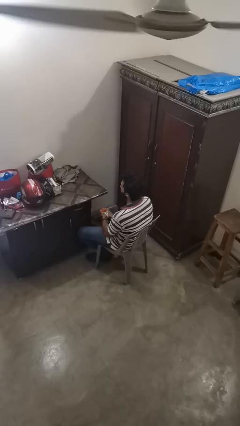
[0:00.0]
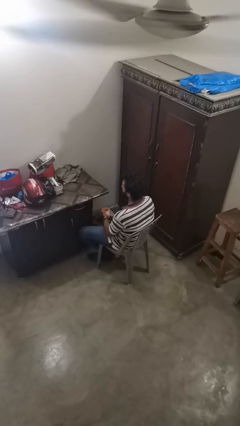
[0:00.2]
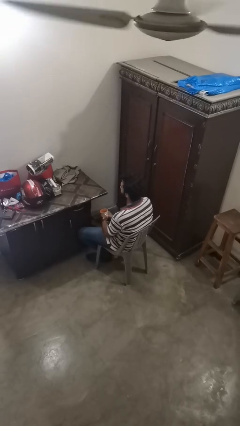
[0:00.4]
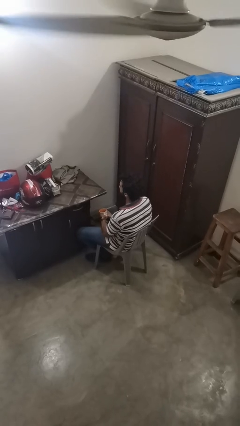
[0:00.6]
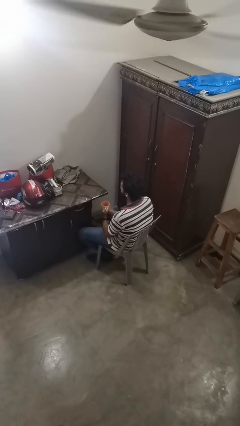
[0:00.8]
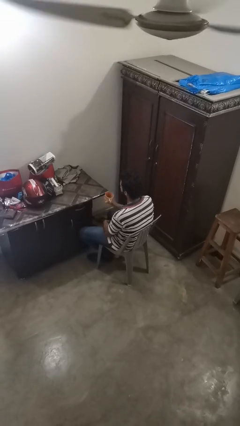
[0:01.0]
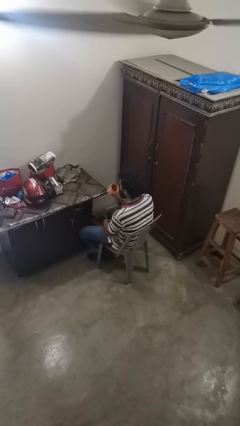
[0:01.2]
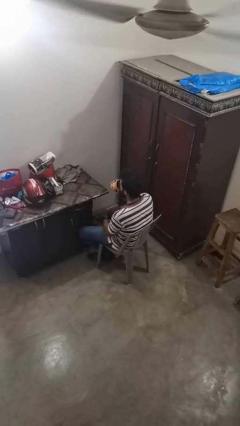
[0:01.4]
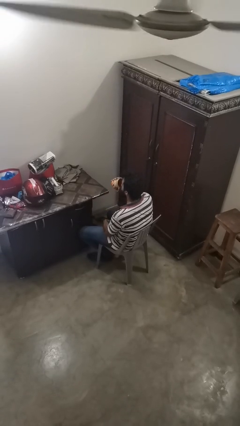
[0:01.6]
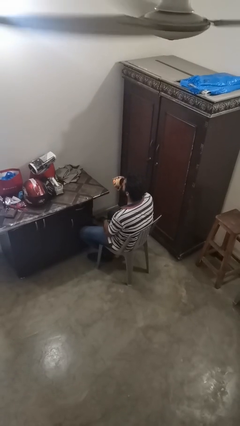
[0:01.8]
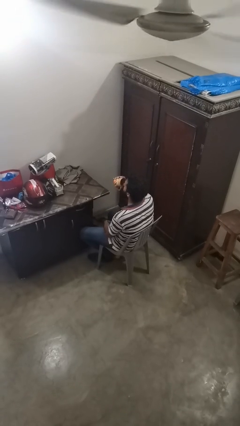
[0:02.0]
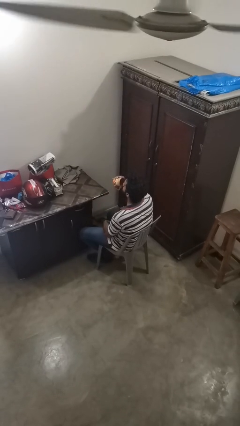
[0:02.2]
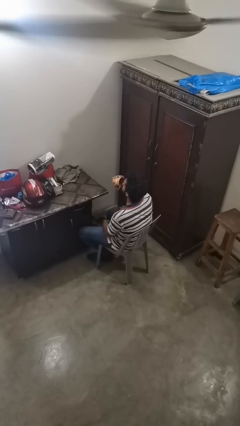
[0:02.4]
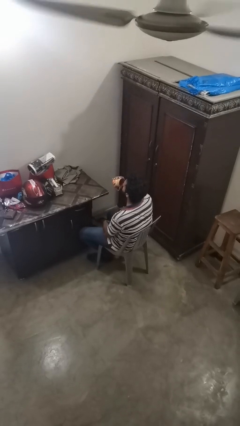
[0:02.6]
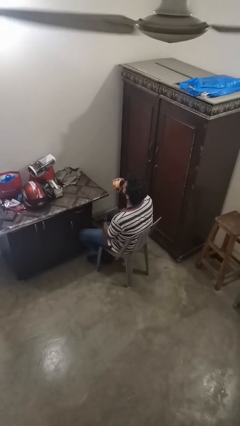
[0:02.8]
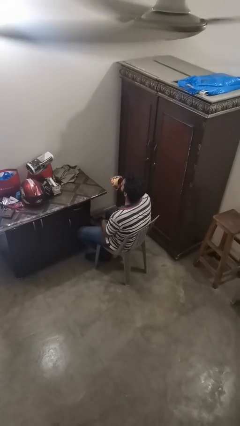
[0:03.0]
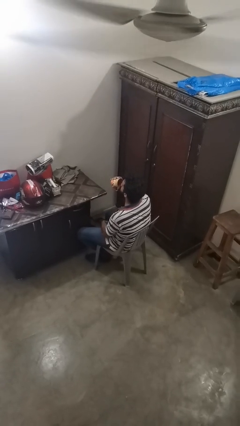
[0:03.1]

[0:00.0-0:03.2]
person drinks from mug

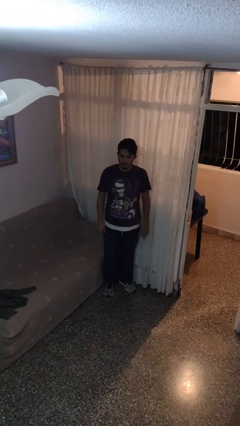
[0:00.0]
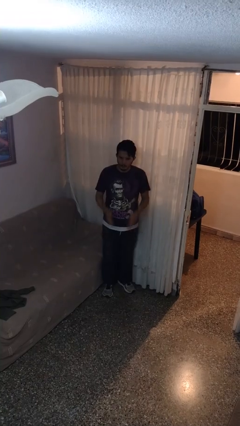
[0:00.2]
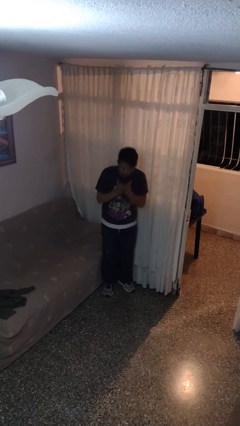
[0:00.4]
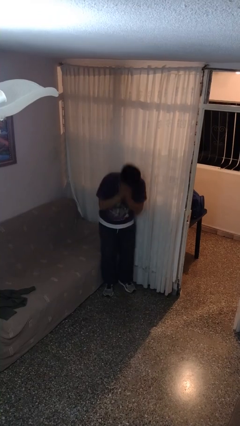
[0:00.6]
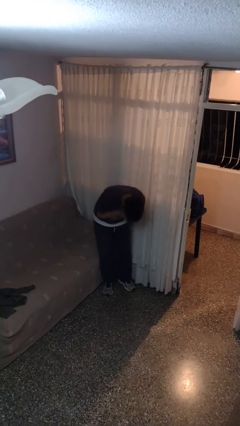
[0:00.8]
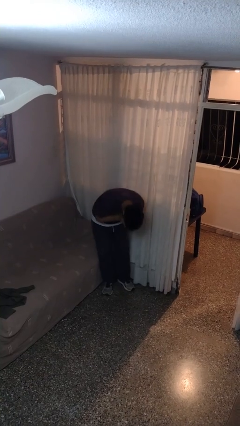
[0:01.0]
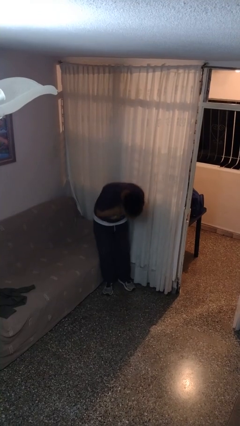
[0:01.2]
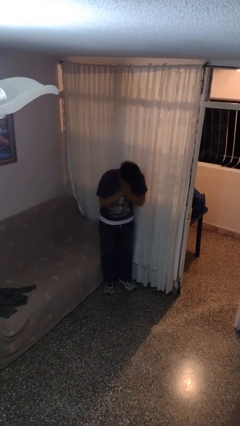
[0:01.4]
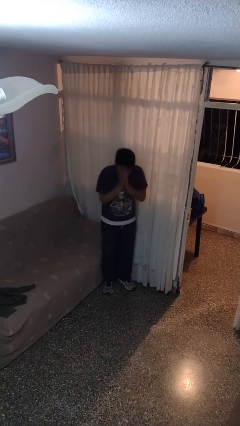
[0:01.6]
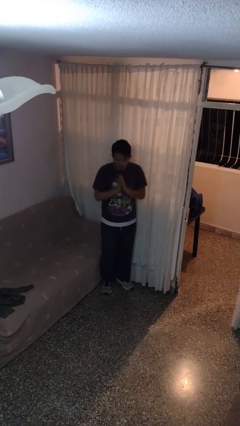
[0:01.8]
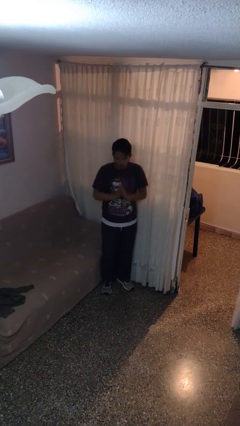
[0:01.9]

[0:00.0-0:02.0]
person sneezes into hand

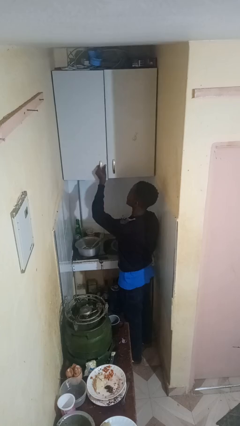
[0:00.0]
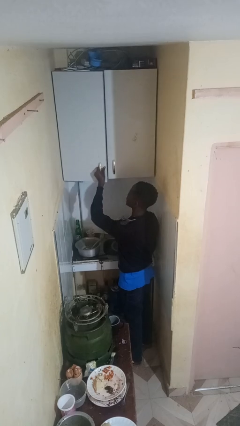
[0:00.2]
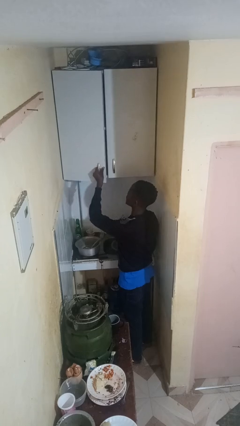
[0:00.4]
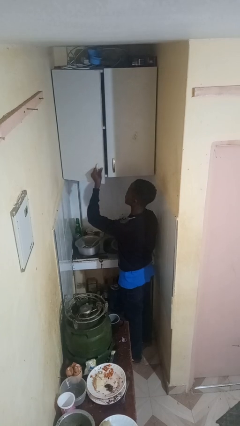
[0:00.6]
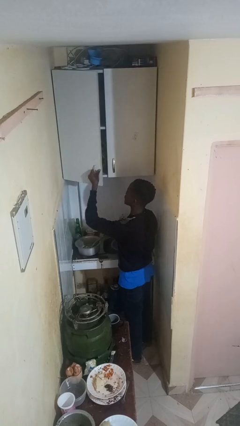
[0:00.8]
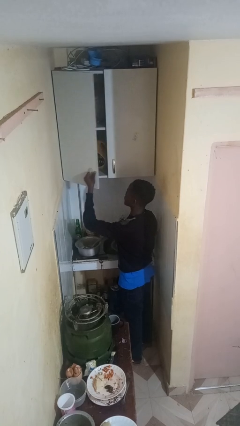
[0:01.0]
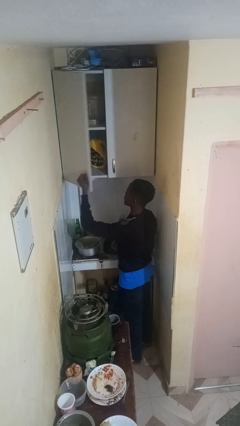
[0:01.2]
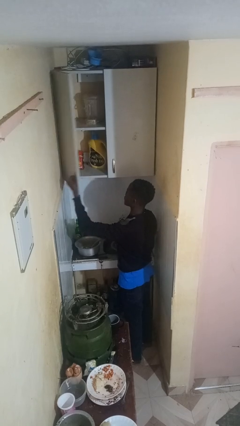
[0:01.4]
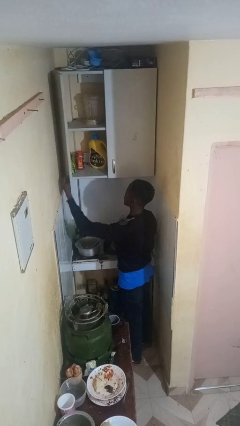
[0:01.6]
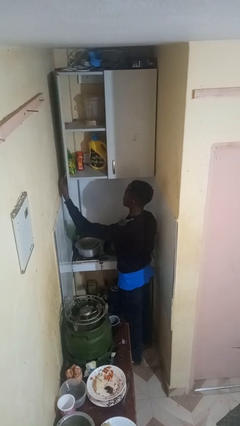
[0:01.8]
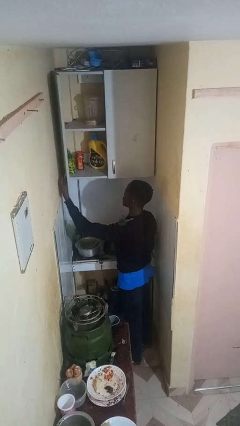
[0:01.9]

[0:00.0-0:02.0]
person opens kitchen drawer

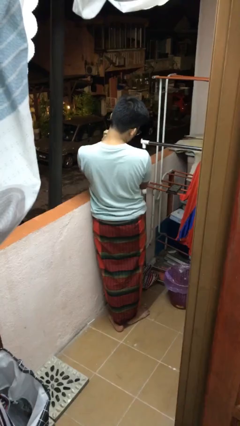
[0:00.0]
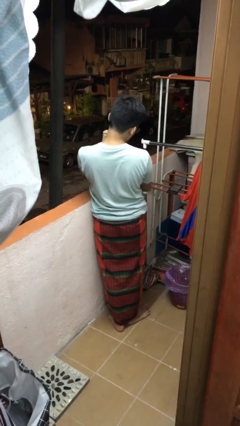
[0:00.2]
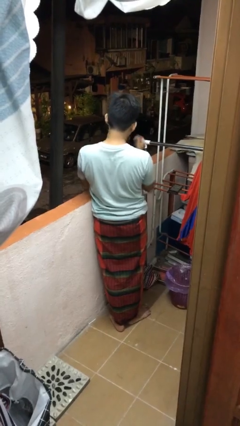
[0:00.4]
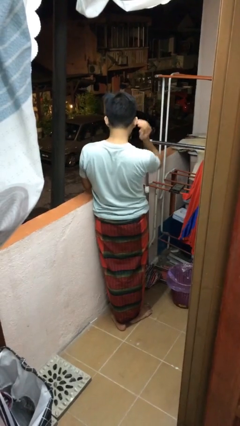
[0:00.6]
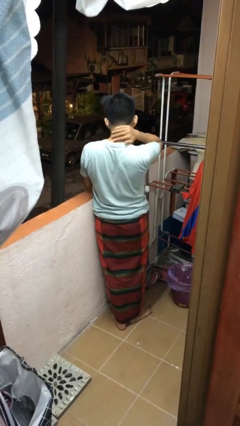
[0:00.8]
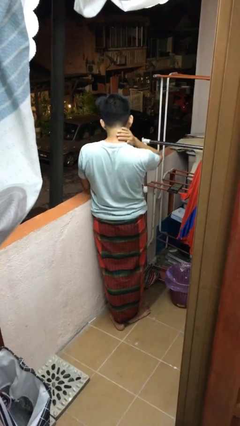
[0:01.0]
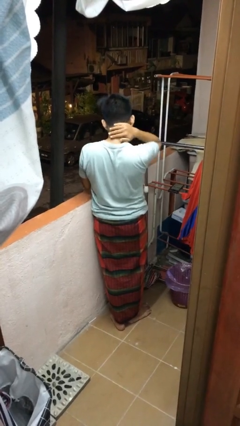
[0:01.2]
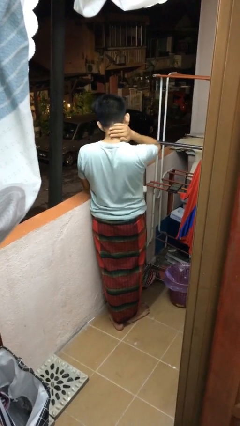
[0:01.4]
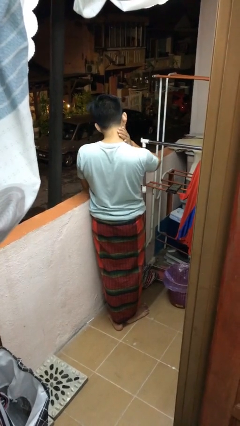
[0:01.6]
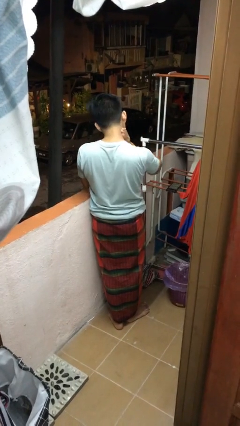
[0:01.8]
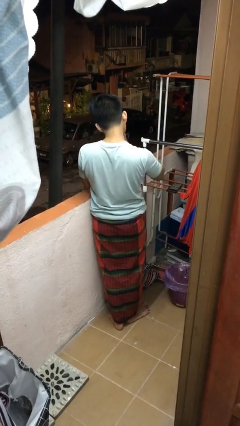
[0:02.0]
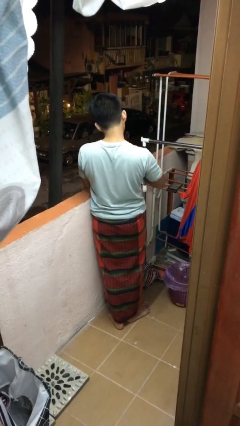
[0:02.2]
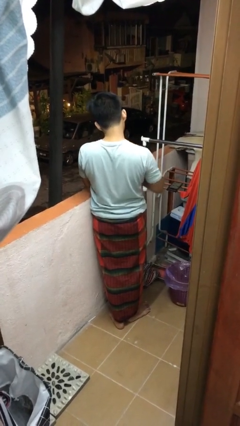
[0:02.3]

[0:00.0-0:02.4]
person rubs neck

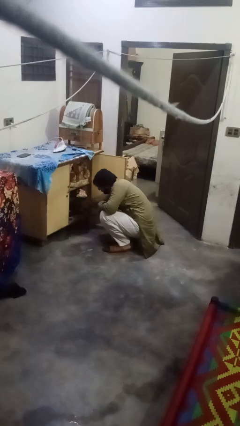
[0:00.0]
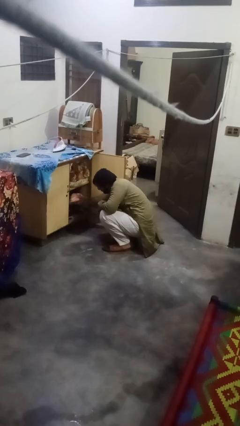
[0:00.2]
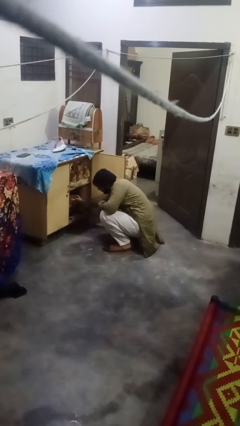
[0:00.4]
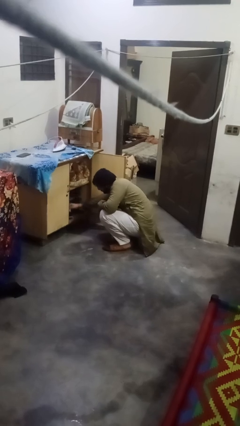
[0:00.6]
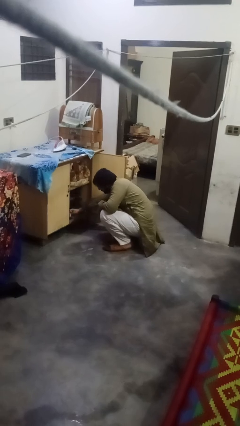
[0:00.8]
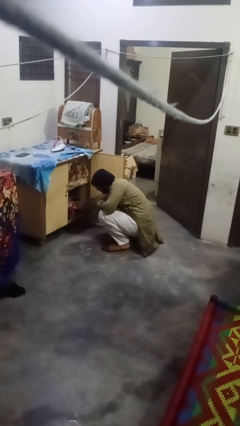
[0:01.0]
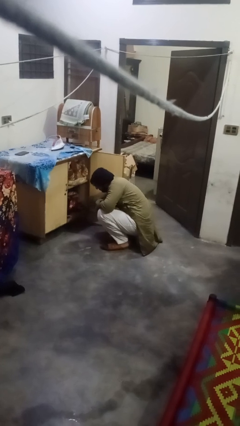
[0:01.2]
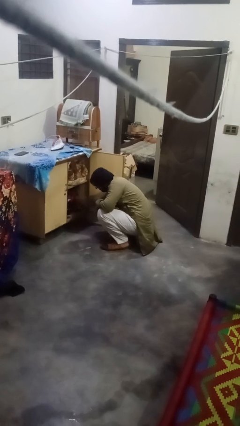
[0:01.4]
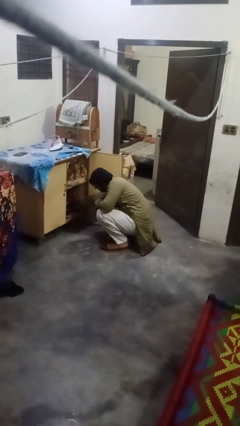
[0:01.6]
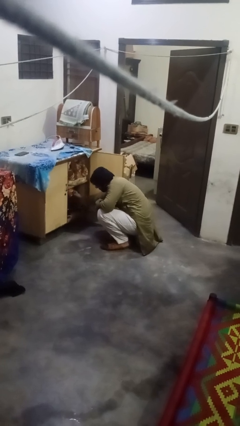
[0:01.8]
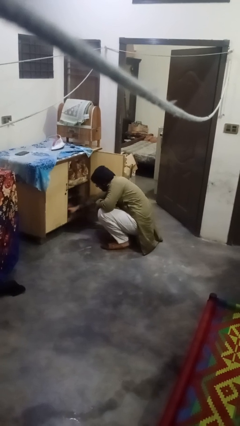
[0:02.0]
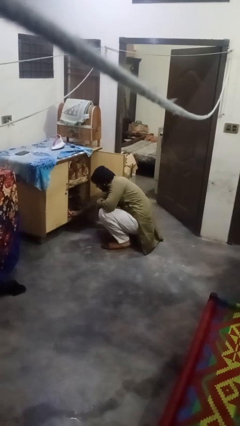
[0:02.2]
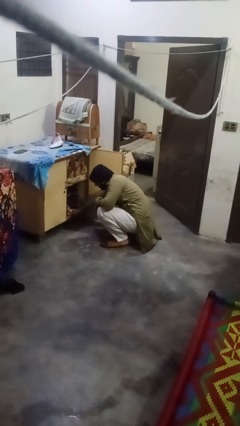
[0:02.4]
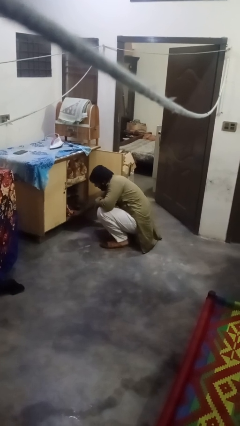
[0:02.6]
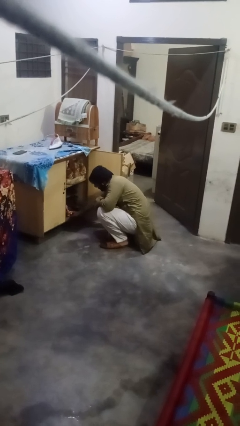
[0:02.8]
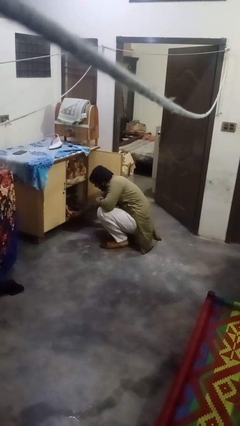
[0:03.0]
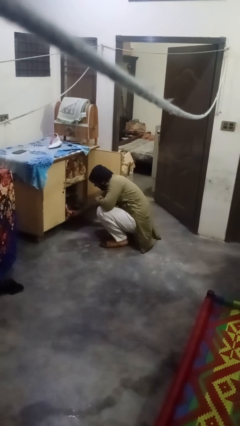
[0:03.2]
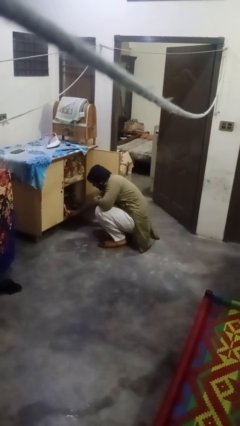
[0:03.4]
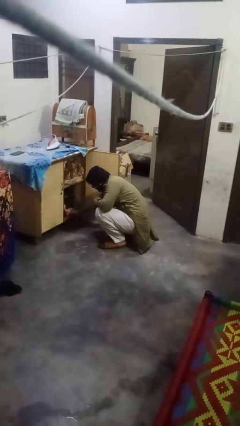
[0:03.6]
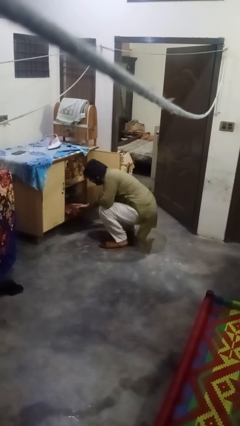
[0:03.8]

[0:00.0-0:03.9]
person searches in cabinet

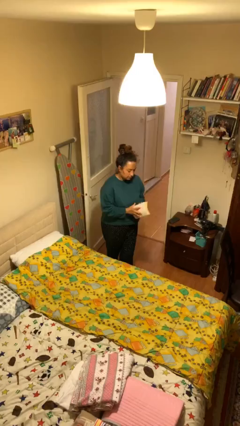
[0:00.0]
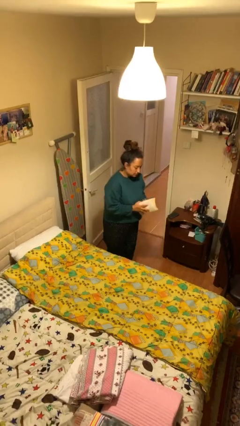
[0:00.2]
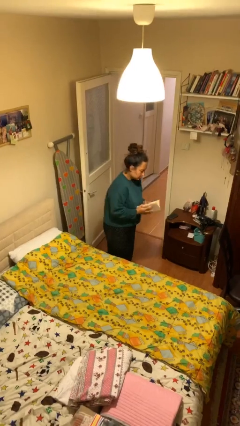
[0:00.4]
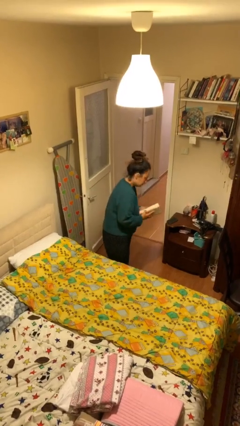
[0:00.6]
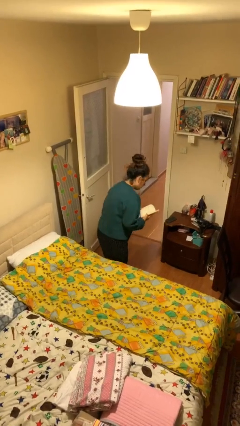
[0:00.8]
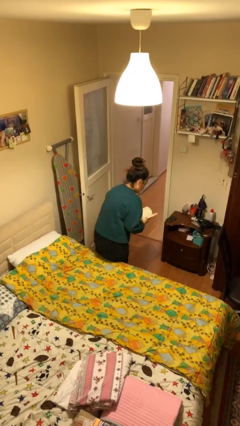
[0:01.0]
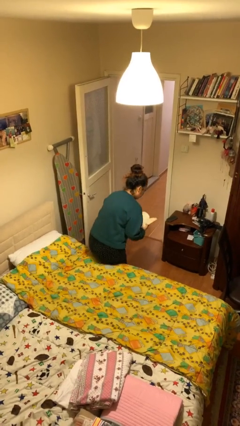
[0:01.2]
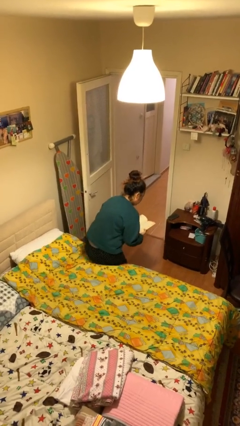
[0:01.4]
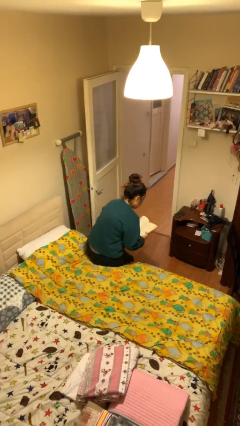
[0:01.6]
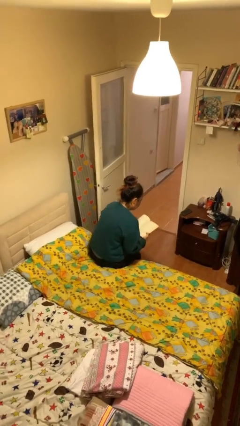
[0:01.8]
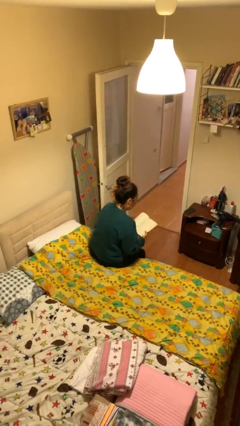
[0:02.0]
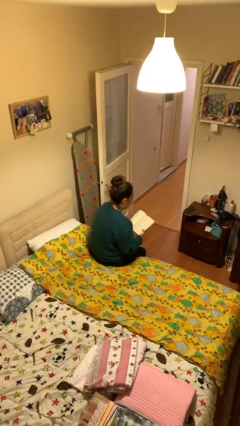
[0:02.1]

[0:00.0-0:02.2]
person sits down

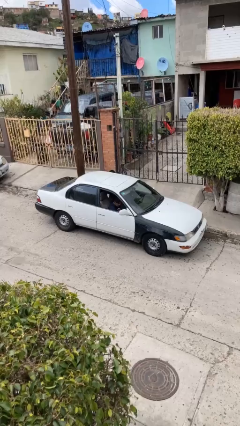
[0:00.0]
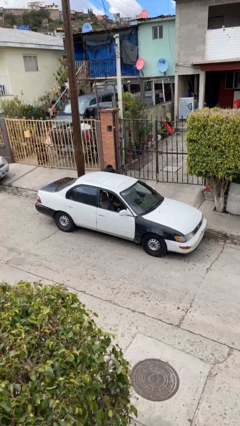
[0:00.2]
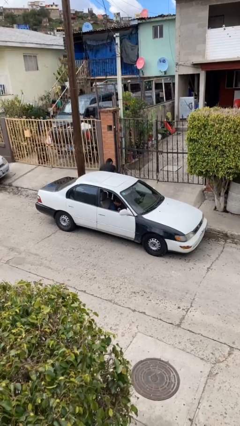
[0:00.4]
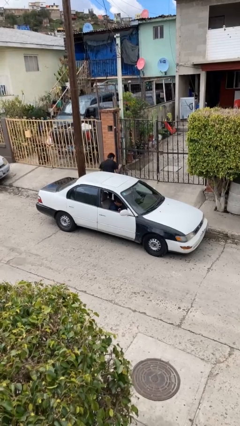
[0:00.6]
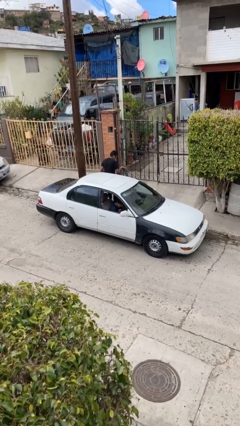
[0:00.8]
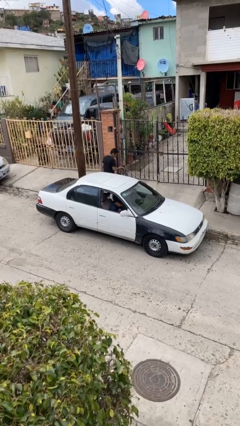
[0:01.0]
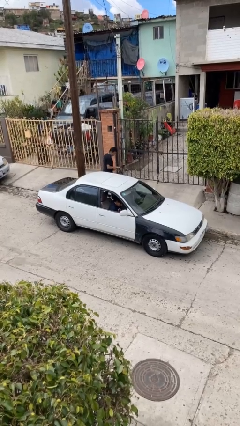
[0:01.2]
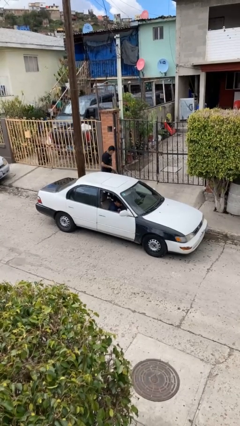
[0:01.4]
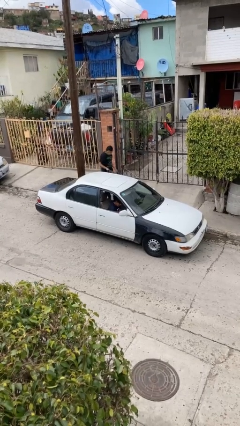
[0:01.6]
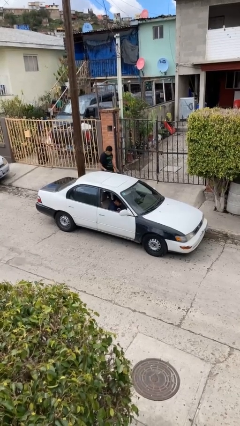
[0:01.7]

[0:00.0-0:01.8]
car drops off person
